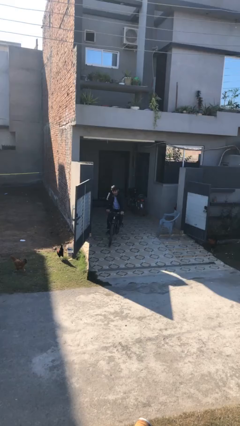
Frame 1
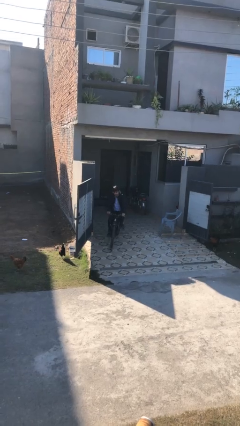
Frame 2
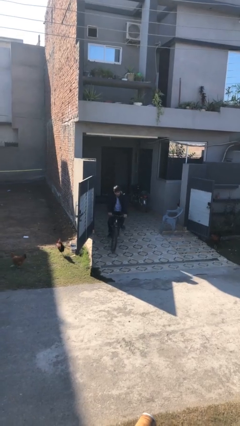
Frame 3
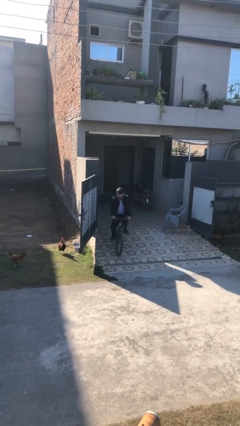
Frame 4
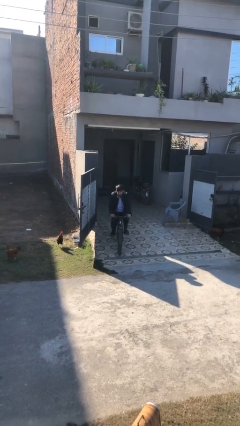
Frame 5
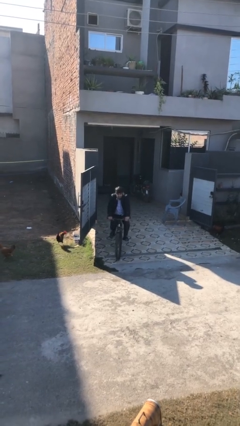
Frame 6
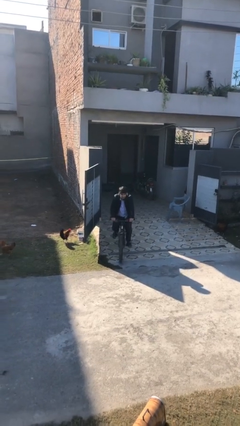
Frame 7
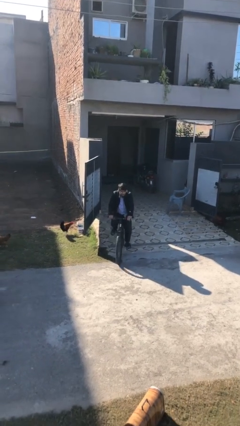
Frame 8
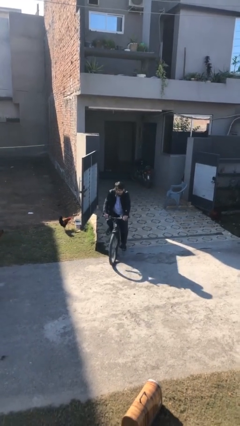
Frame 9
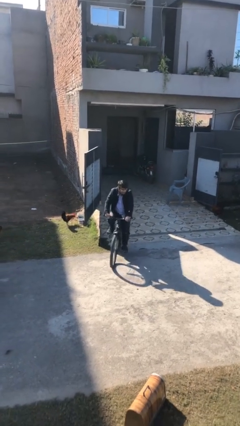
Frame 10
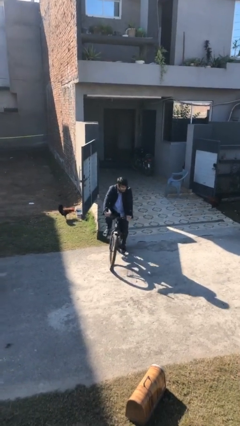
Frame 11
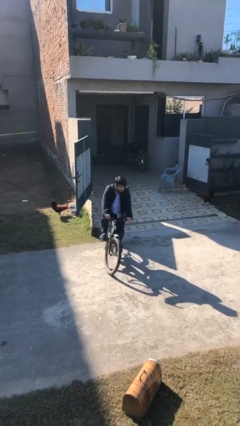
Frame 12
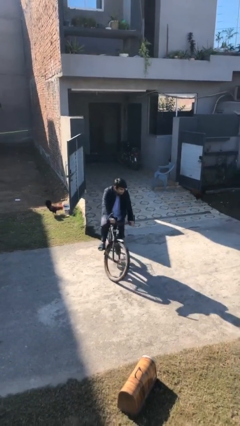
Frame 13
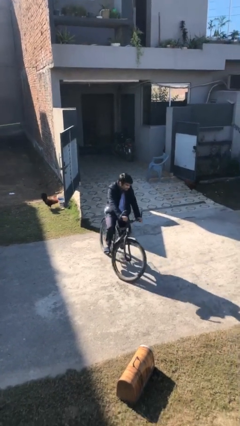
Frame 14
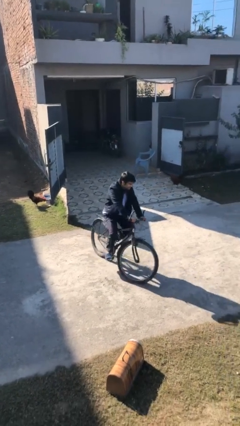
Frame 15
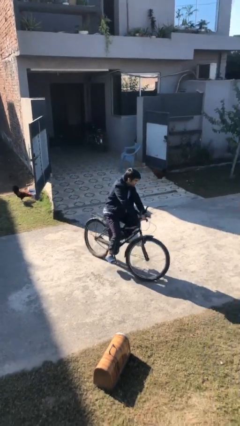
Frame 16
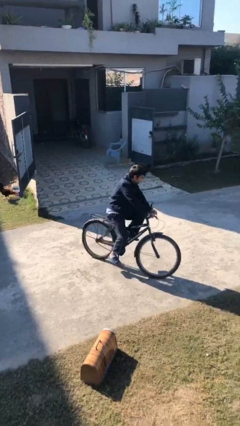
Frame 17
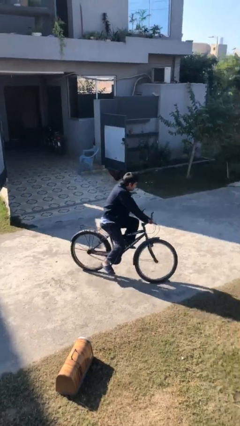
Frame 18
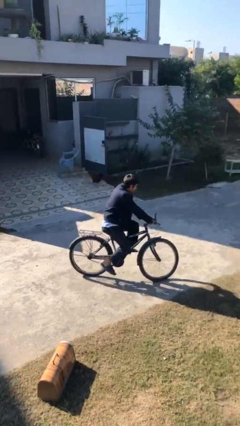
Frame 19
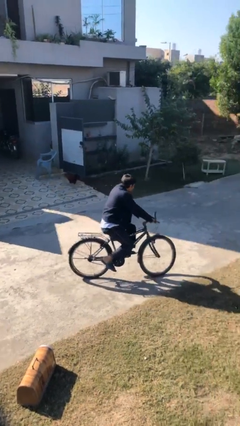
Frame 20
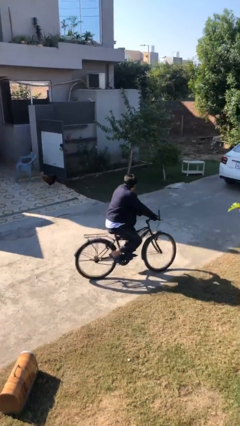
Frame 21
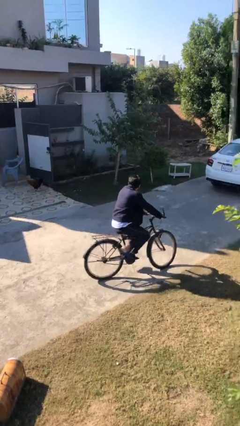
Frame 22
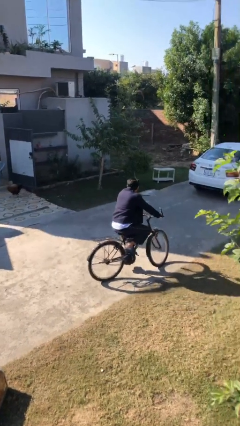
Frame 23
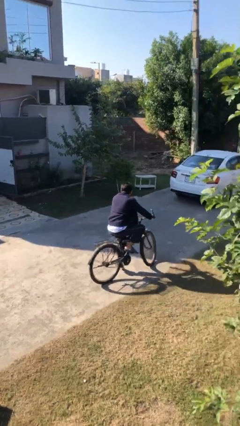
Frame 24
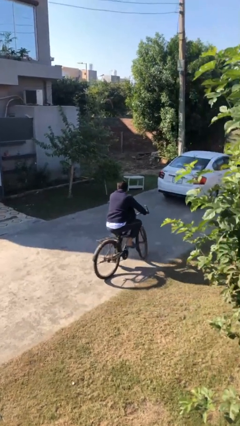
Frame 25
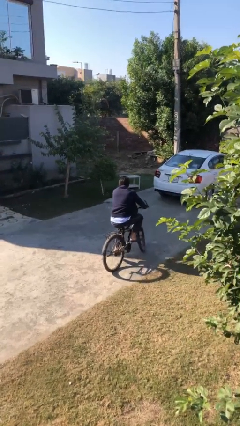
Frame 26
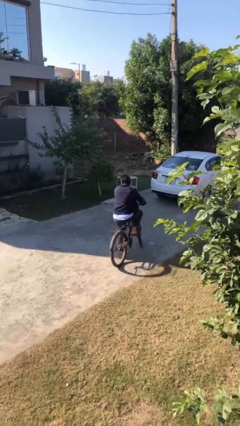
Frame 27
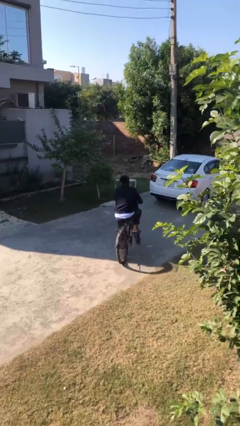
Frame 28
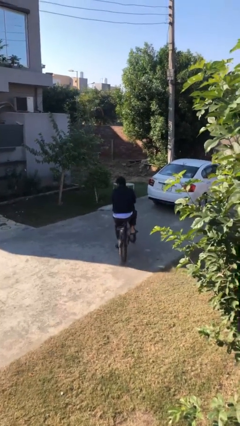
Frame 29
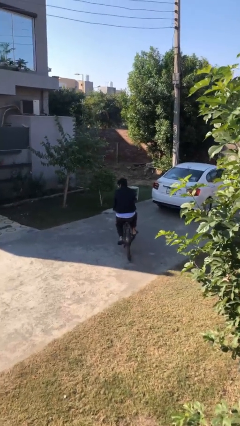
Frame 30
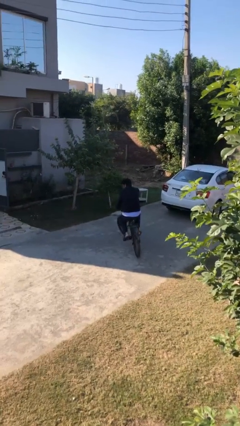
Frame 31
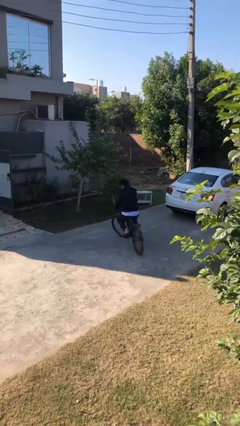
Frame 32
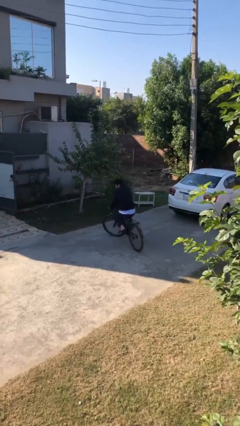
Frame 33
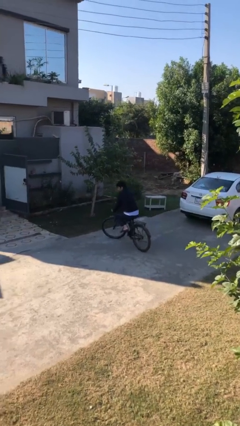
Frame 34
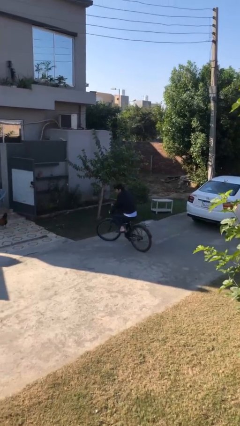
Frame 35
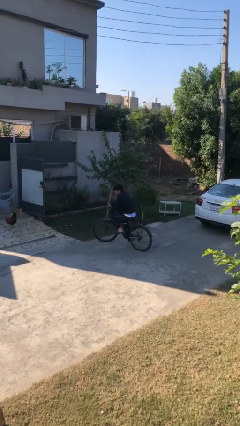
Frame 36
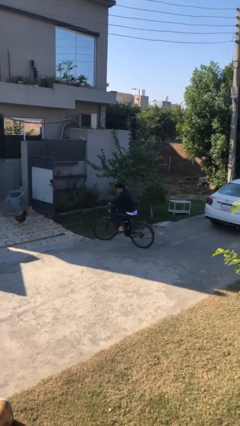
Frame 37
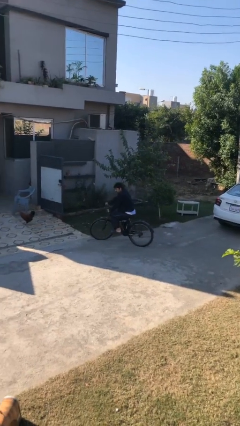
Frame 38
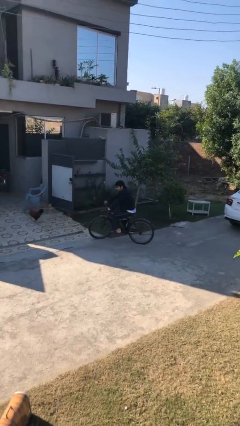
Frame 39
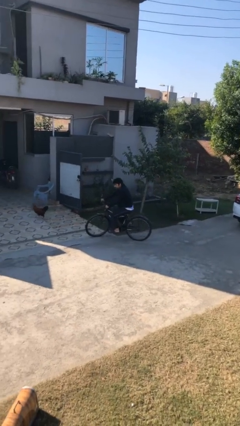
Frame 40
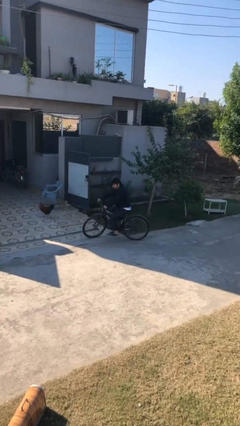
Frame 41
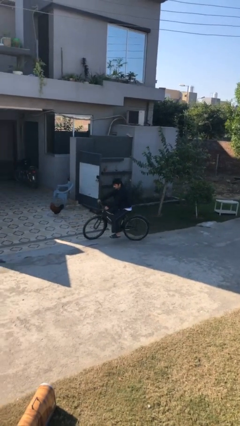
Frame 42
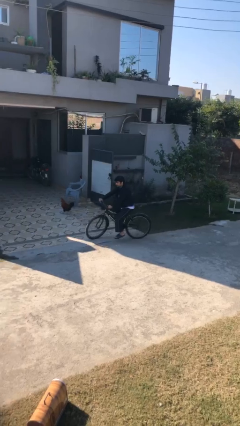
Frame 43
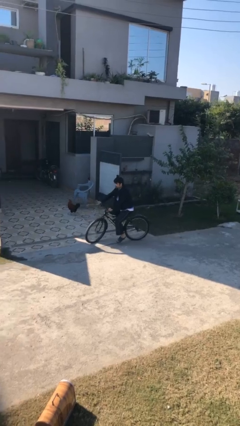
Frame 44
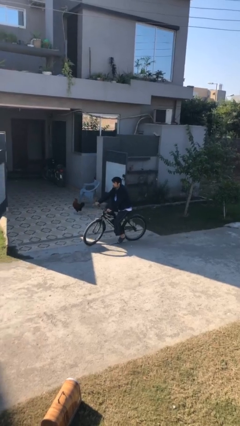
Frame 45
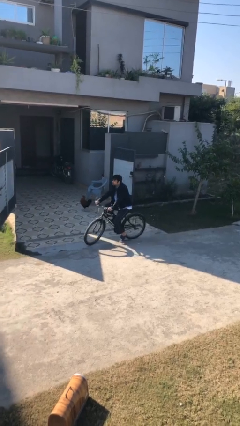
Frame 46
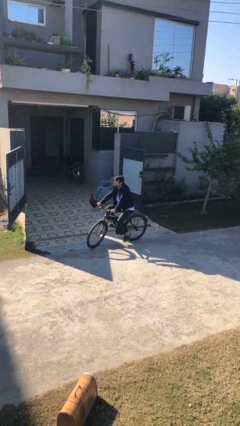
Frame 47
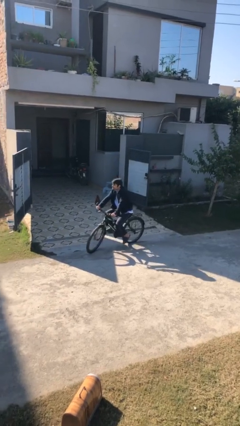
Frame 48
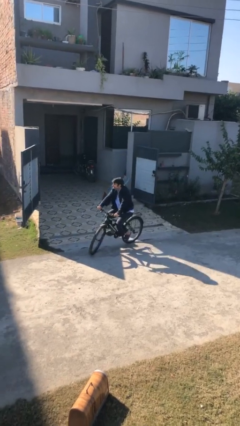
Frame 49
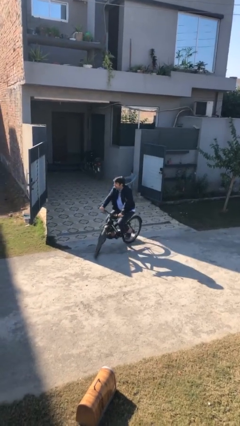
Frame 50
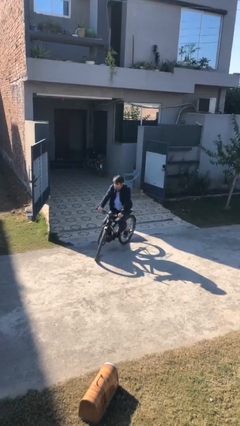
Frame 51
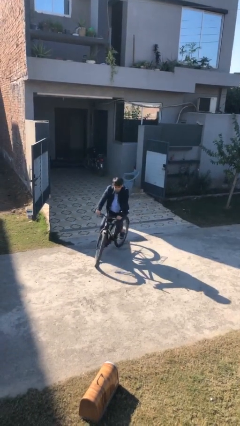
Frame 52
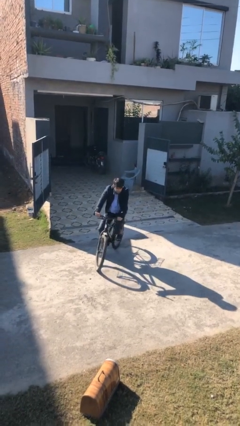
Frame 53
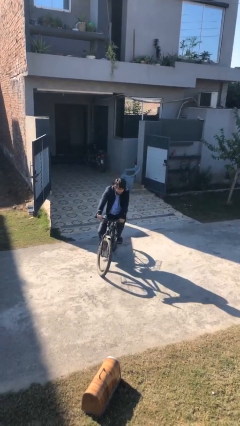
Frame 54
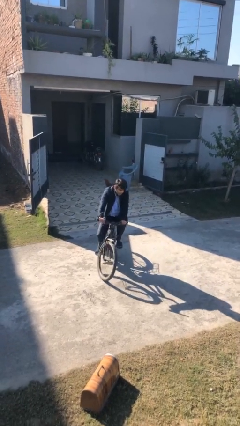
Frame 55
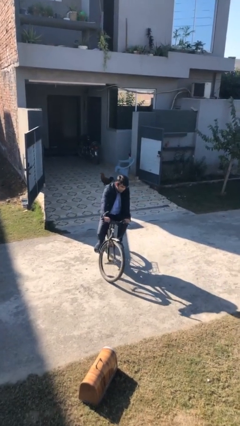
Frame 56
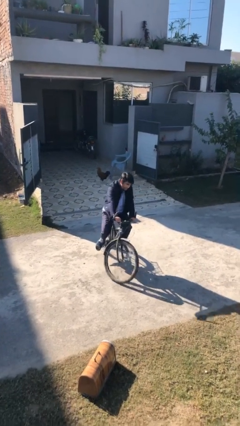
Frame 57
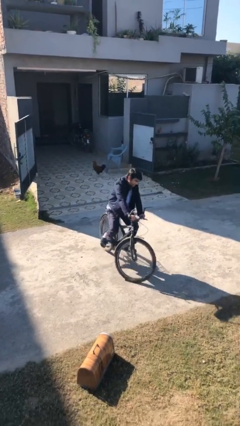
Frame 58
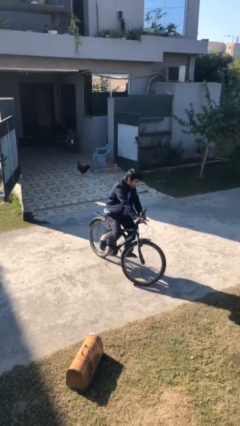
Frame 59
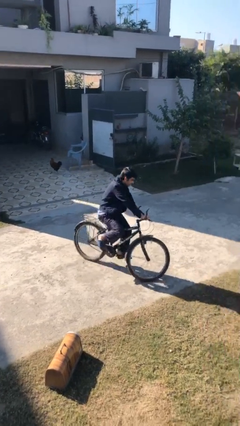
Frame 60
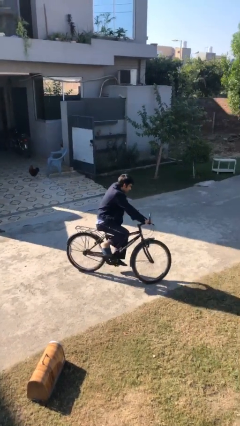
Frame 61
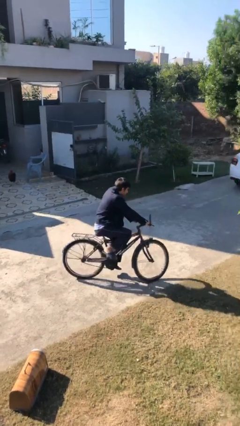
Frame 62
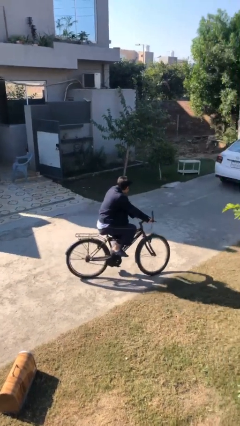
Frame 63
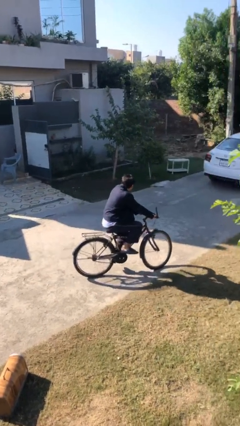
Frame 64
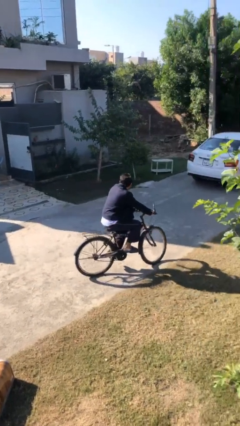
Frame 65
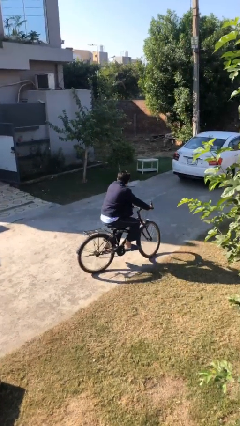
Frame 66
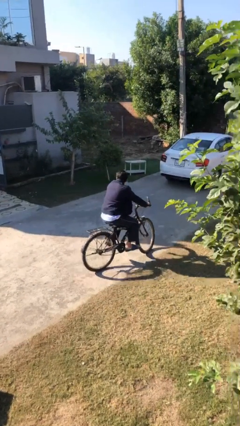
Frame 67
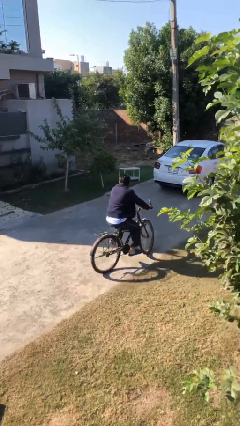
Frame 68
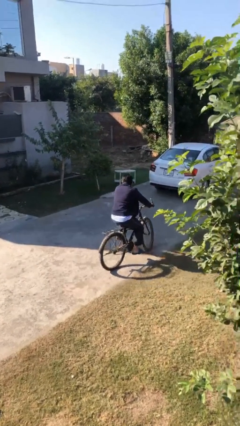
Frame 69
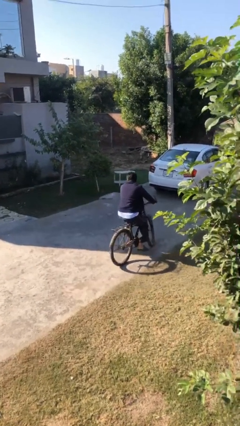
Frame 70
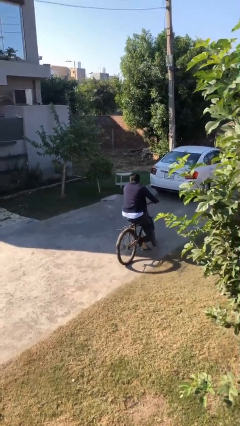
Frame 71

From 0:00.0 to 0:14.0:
person rides bicycle

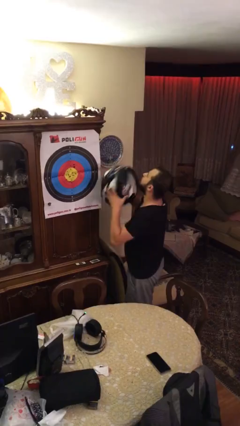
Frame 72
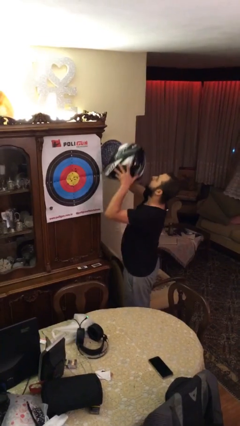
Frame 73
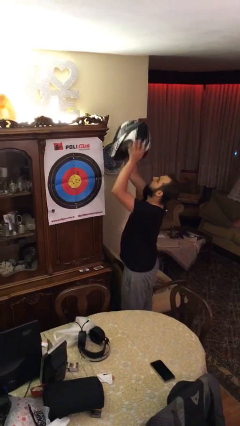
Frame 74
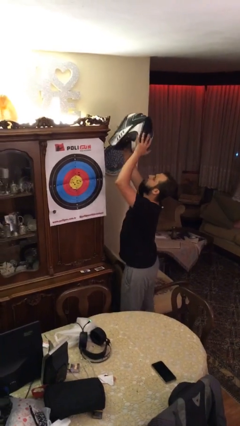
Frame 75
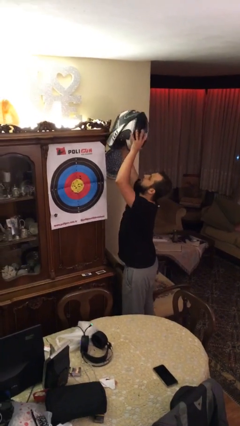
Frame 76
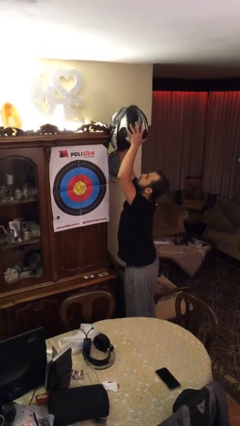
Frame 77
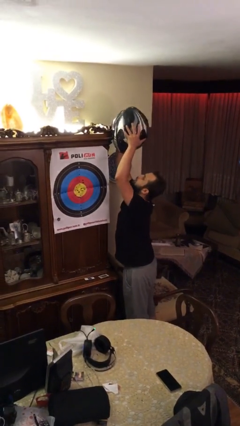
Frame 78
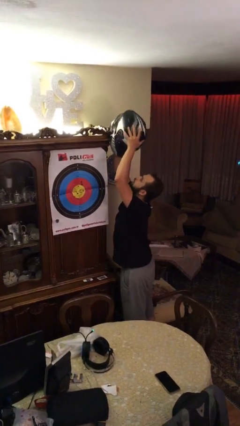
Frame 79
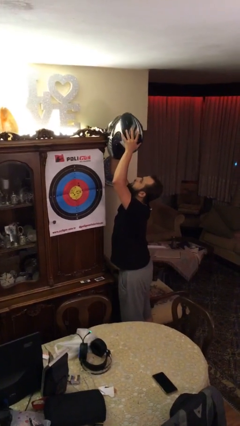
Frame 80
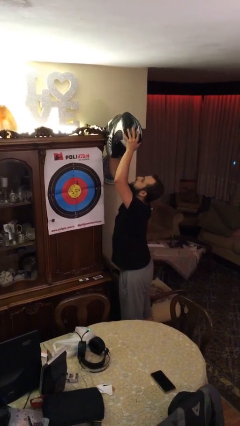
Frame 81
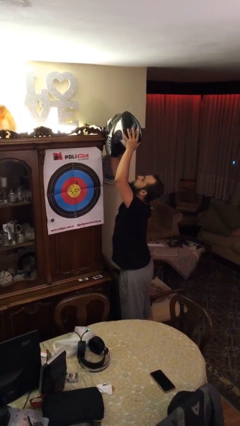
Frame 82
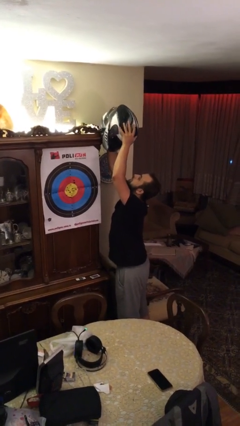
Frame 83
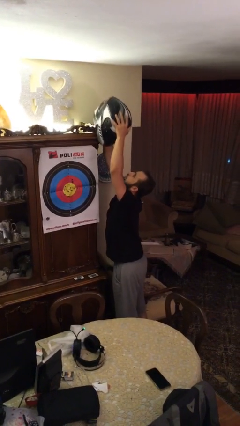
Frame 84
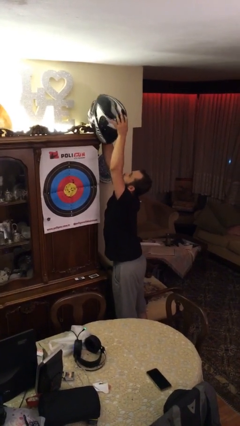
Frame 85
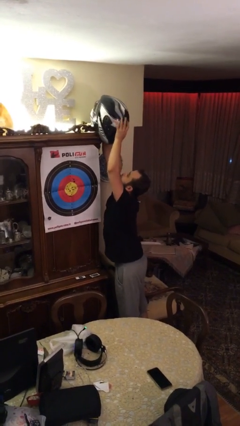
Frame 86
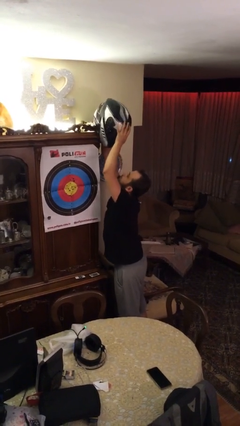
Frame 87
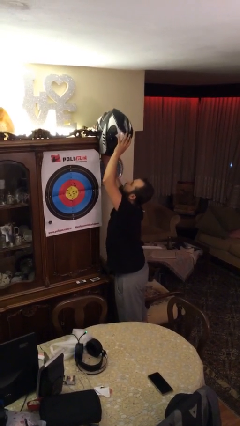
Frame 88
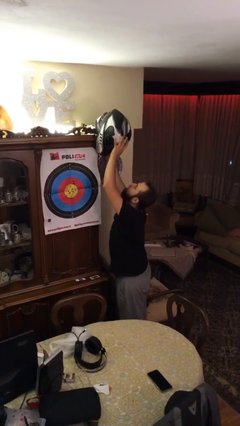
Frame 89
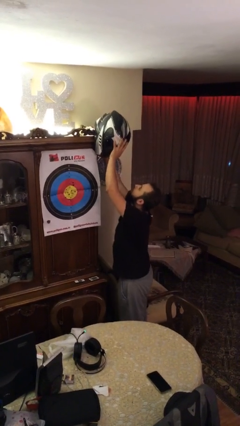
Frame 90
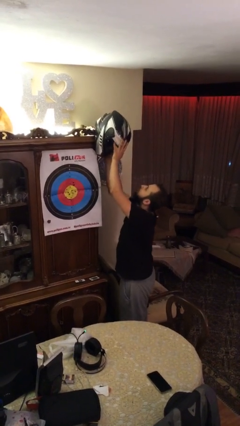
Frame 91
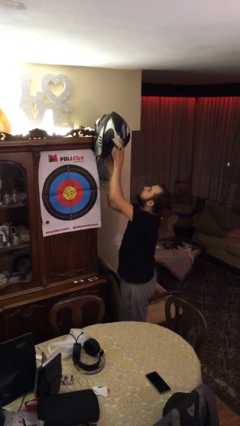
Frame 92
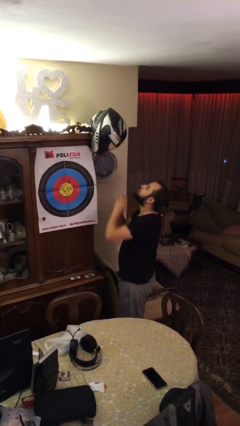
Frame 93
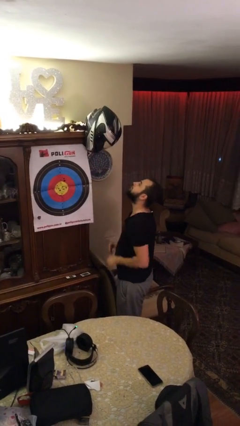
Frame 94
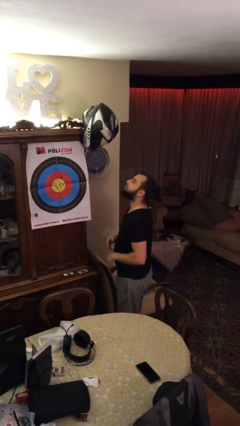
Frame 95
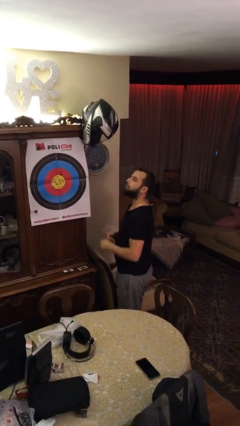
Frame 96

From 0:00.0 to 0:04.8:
person puts down object on shelf
